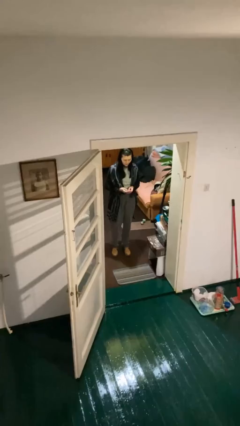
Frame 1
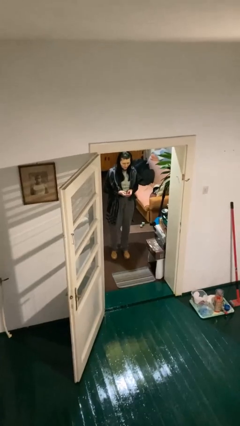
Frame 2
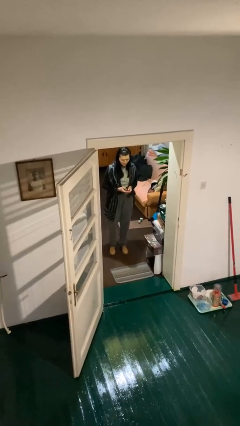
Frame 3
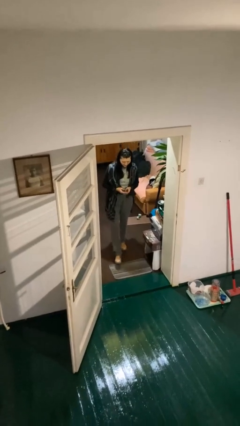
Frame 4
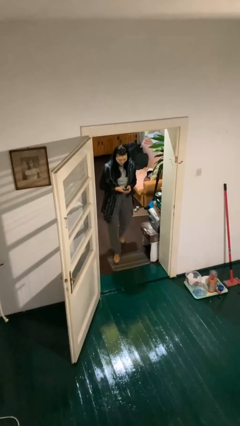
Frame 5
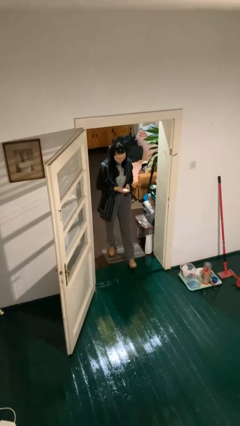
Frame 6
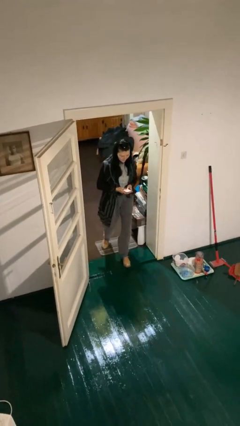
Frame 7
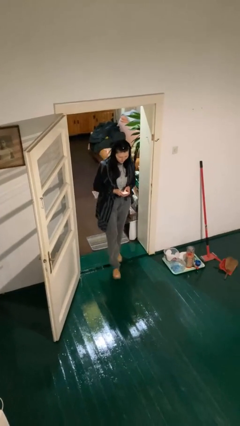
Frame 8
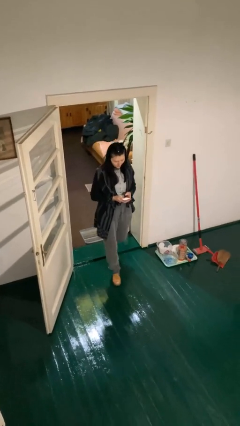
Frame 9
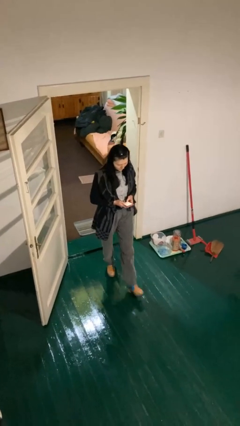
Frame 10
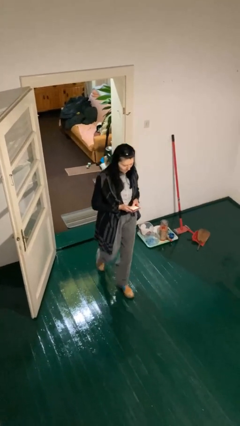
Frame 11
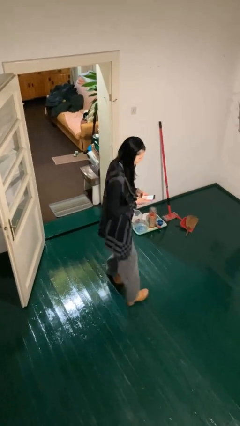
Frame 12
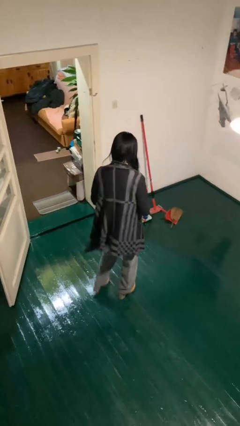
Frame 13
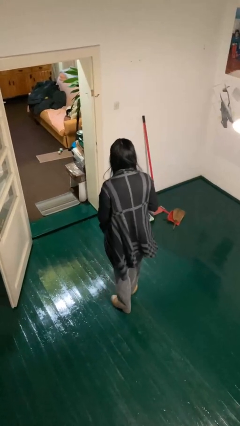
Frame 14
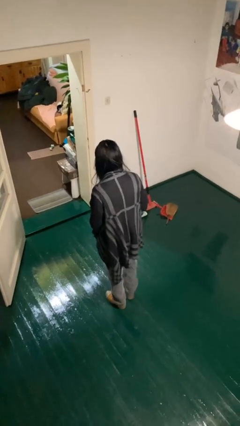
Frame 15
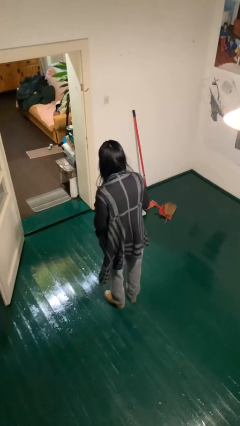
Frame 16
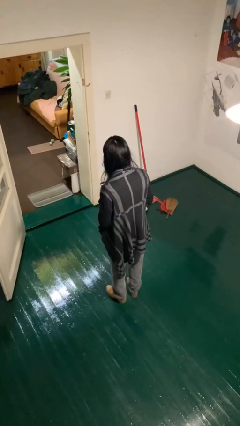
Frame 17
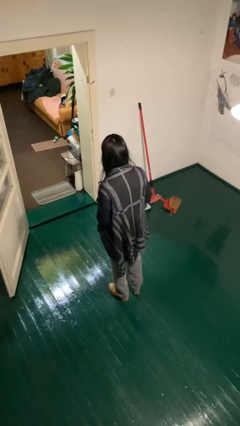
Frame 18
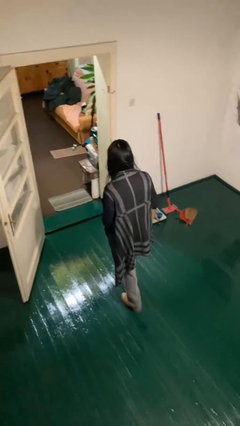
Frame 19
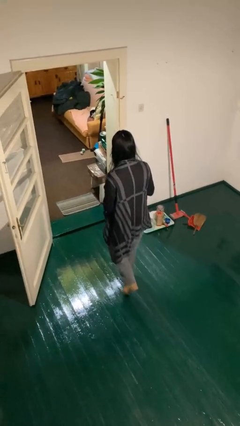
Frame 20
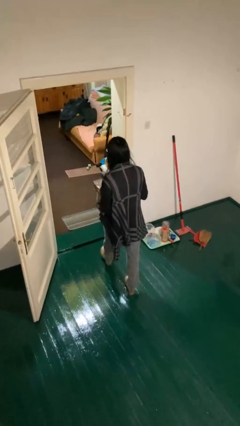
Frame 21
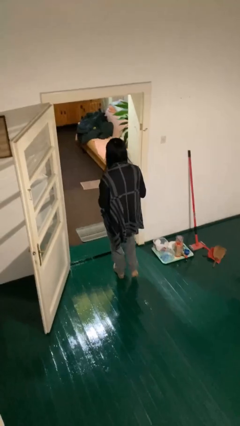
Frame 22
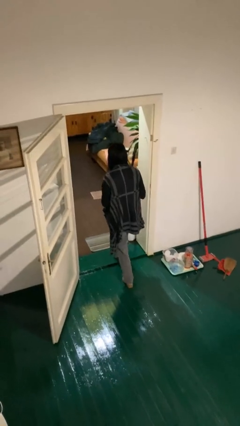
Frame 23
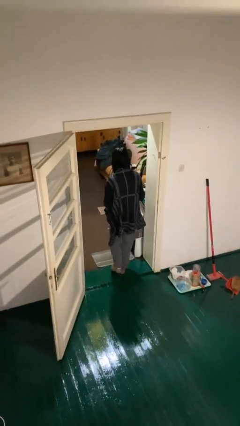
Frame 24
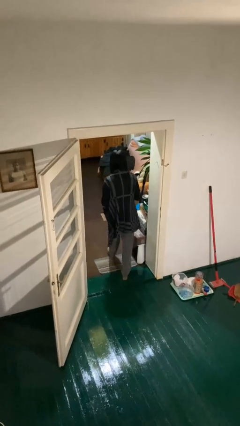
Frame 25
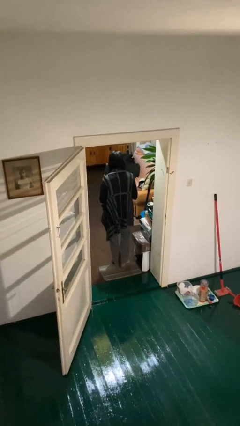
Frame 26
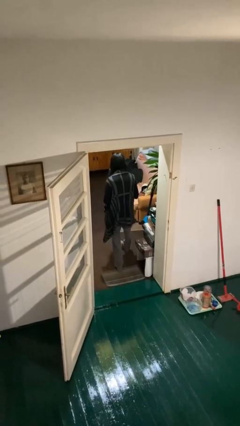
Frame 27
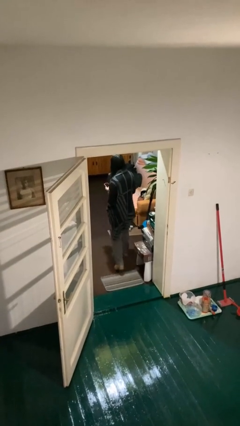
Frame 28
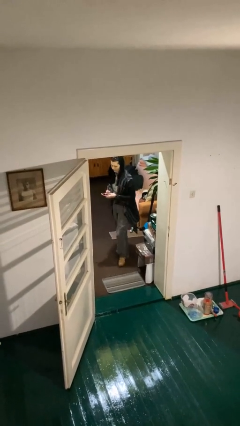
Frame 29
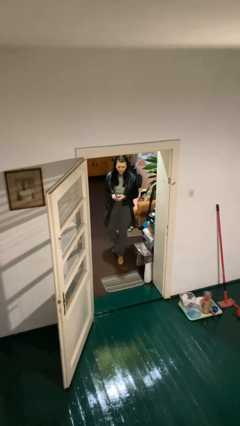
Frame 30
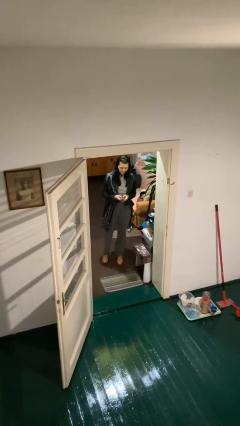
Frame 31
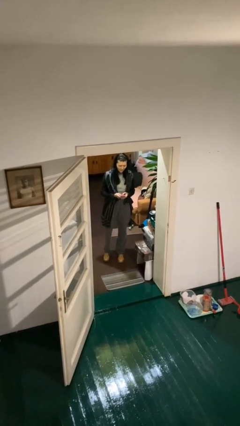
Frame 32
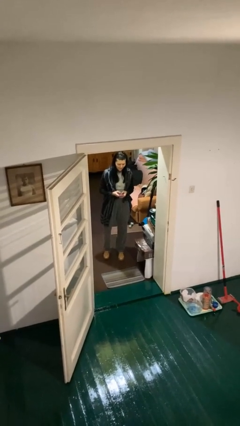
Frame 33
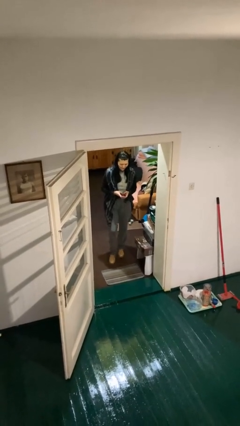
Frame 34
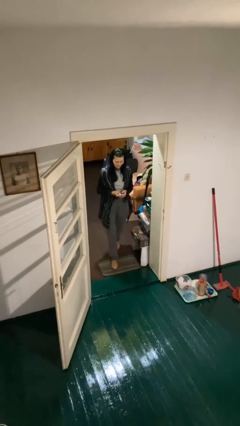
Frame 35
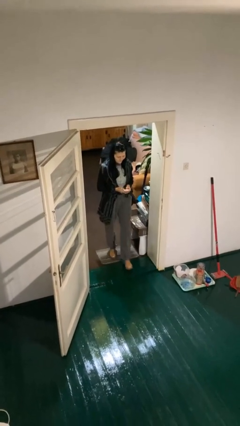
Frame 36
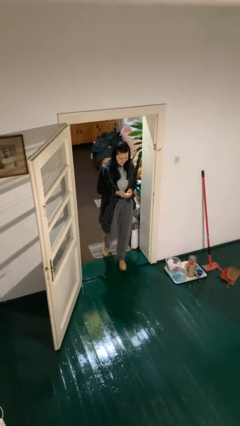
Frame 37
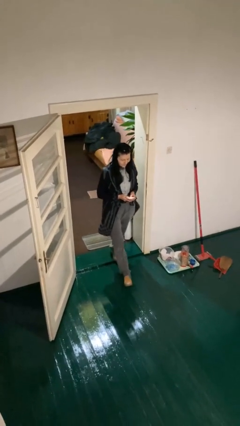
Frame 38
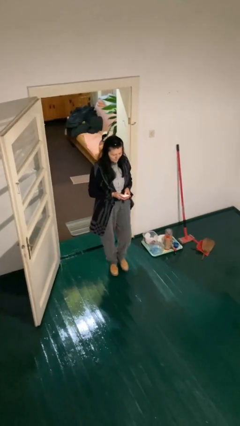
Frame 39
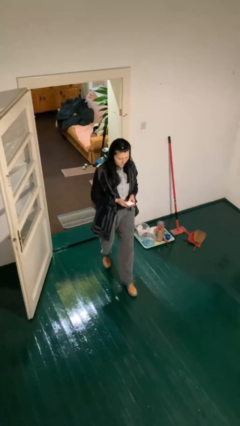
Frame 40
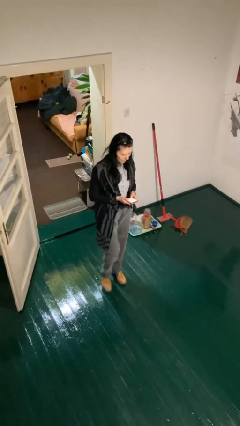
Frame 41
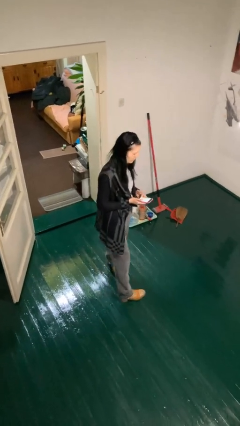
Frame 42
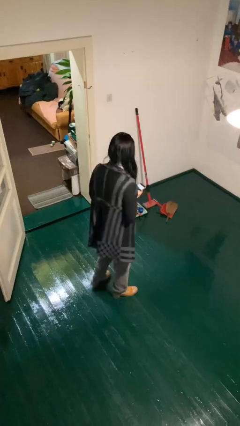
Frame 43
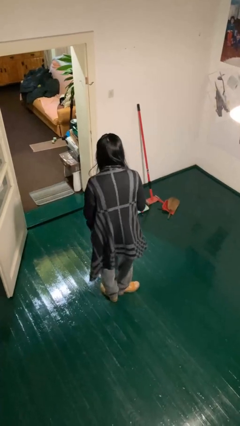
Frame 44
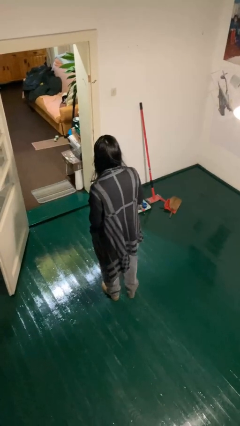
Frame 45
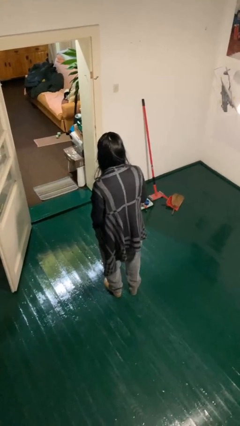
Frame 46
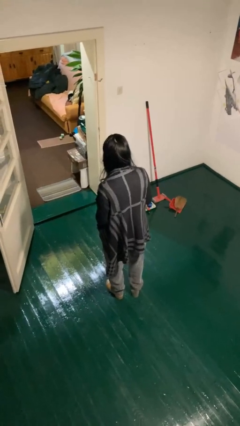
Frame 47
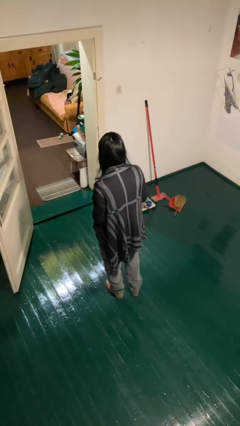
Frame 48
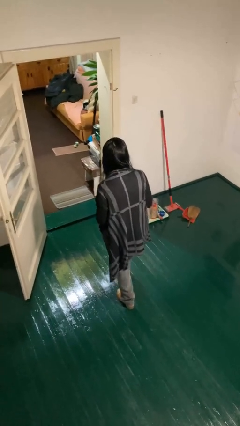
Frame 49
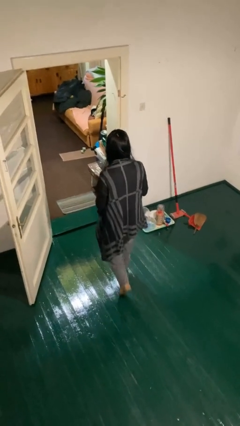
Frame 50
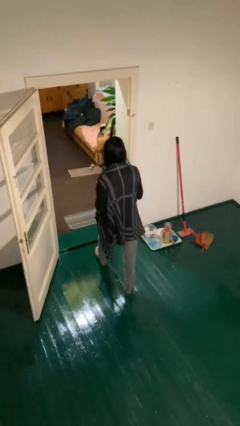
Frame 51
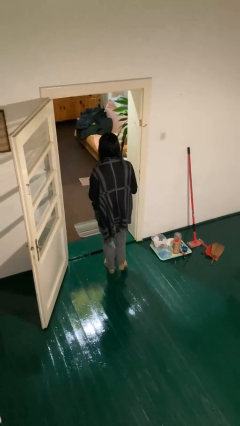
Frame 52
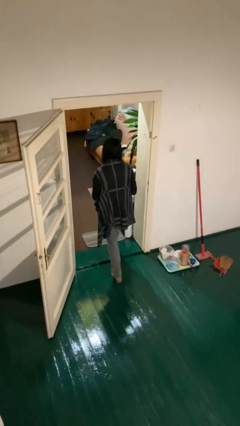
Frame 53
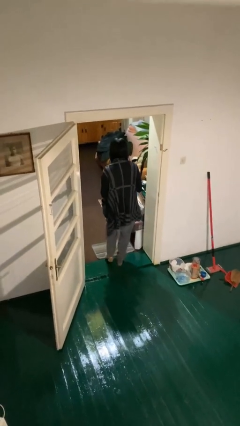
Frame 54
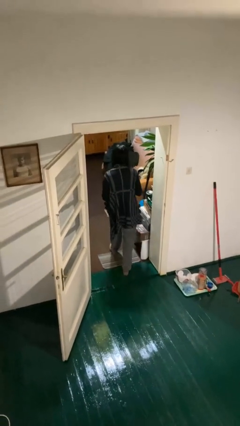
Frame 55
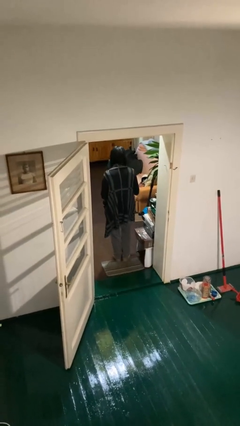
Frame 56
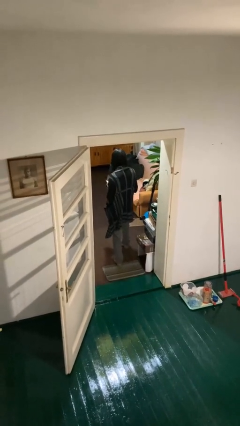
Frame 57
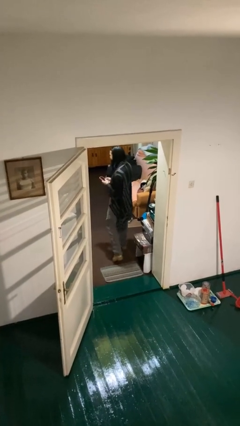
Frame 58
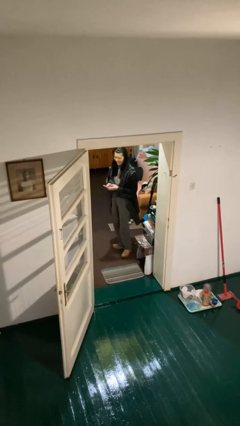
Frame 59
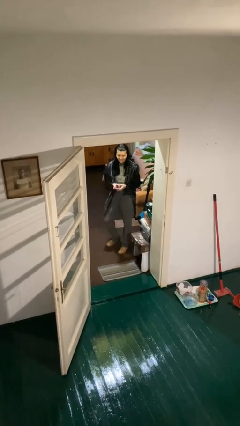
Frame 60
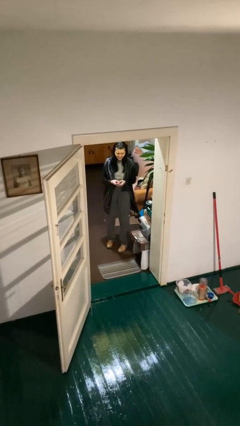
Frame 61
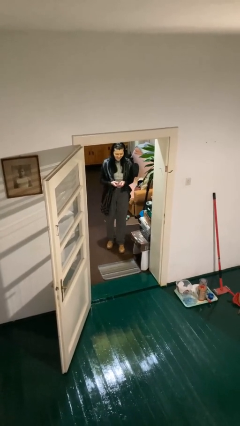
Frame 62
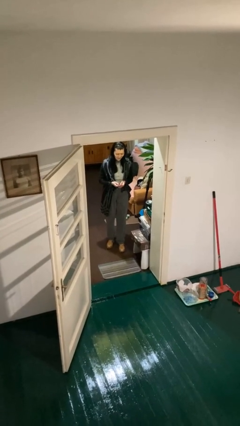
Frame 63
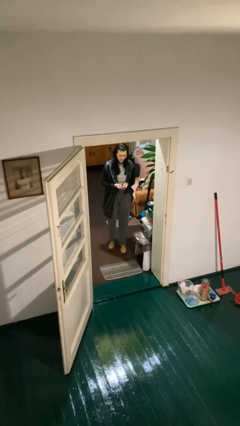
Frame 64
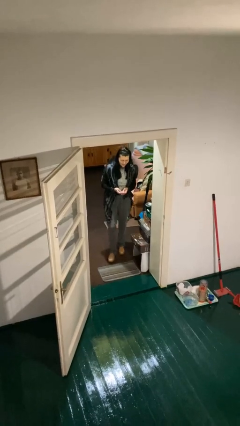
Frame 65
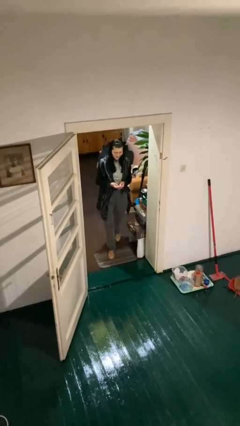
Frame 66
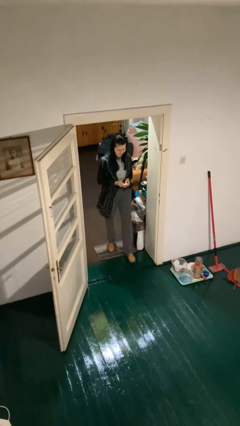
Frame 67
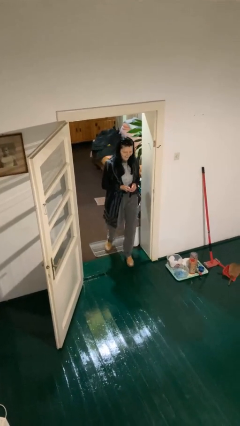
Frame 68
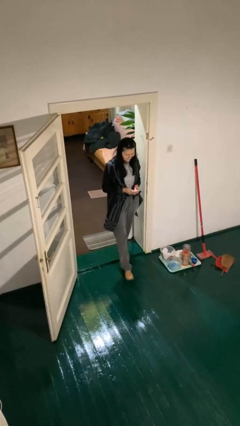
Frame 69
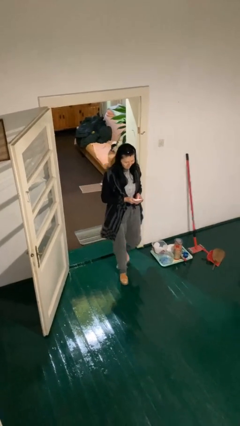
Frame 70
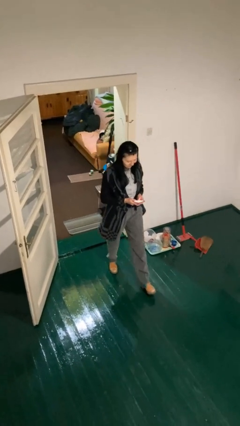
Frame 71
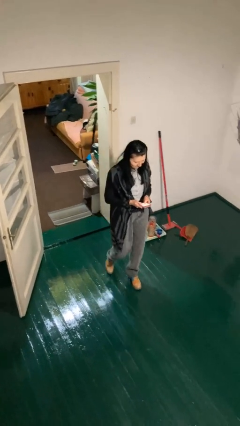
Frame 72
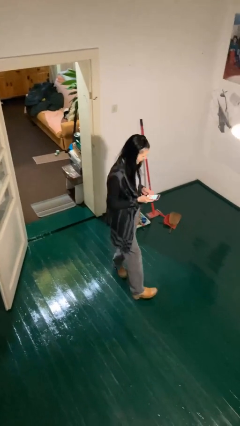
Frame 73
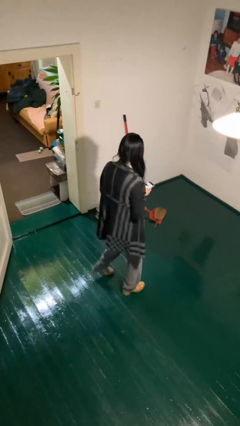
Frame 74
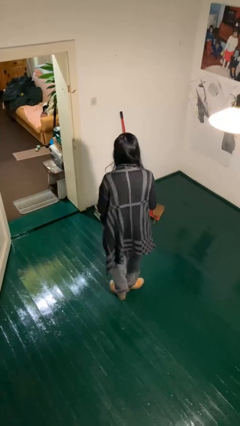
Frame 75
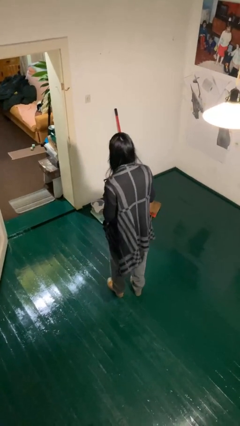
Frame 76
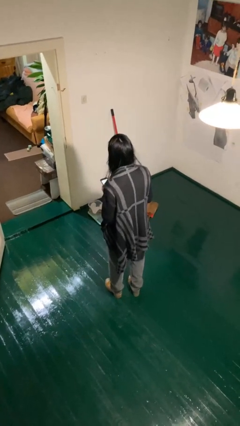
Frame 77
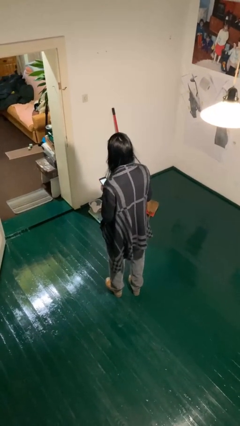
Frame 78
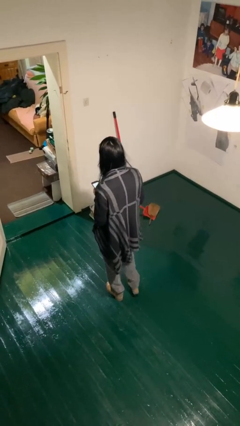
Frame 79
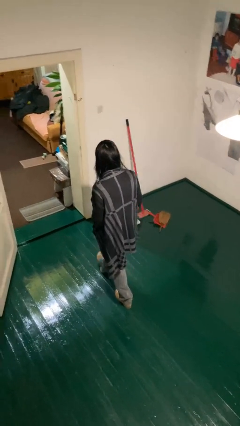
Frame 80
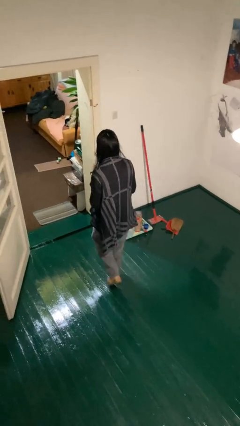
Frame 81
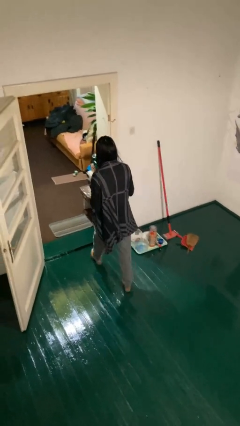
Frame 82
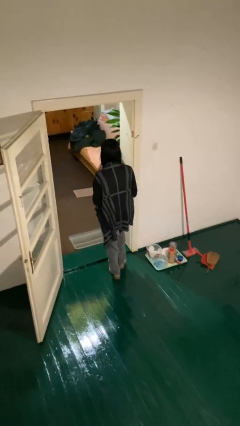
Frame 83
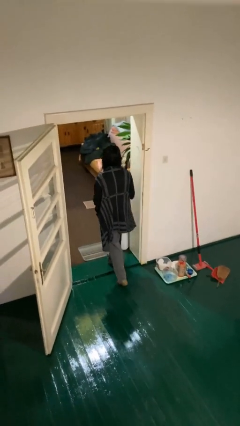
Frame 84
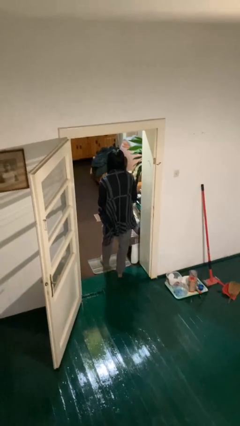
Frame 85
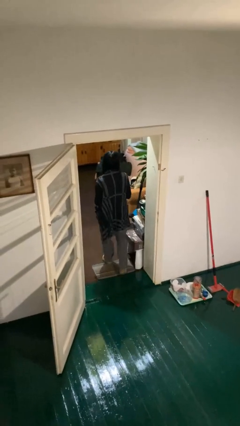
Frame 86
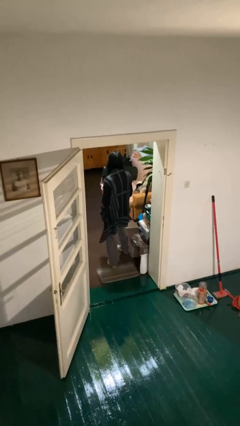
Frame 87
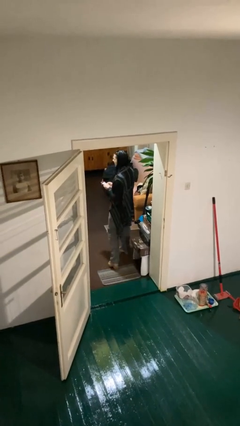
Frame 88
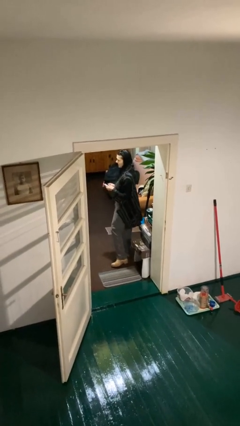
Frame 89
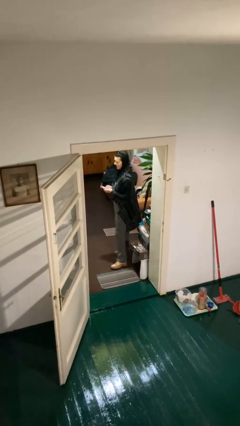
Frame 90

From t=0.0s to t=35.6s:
person texts on phone

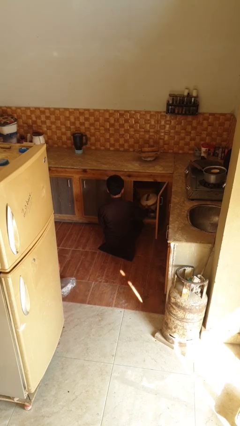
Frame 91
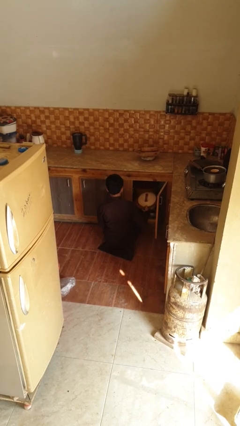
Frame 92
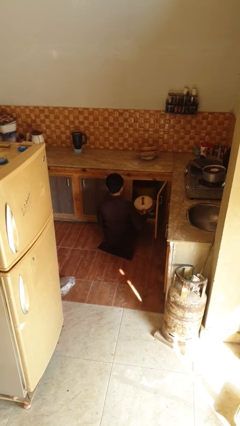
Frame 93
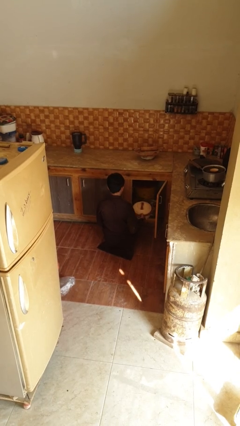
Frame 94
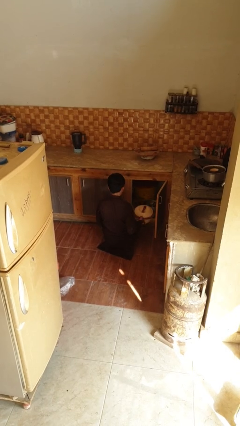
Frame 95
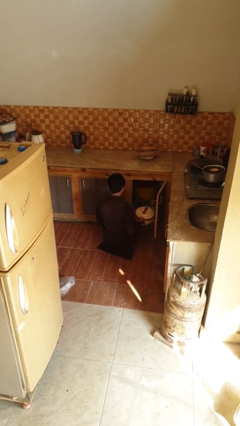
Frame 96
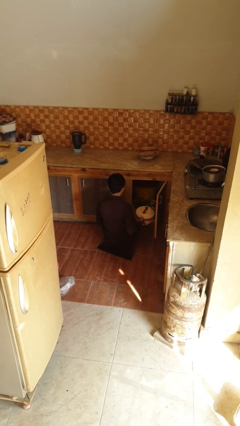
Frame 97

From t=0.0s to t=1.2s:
person takes object from kitchen drawer
